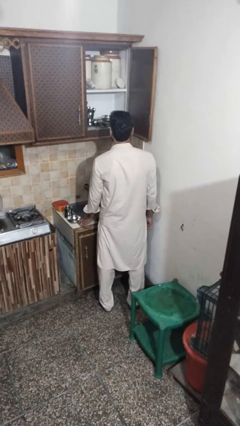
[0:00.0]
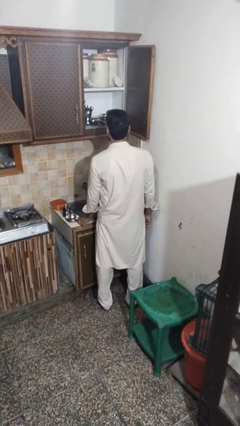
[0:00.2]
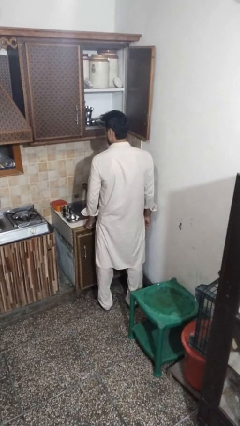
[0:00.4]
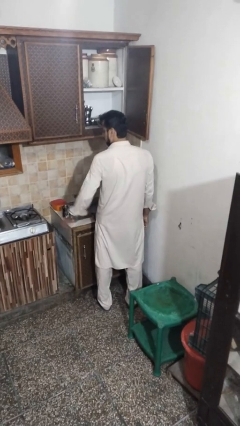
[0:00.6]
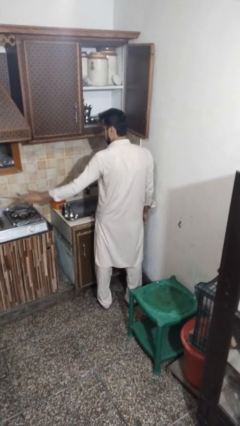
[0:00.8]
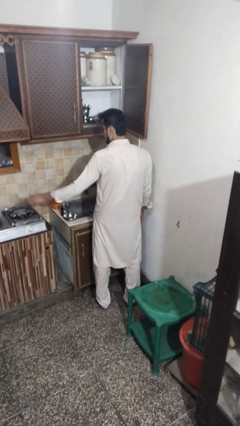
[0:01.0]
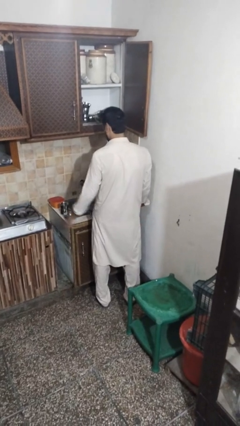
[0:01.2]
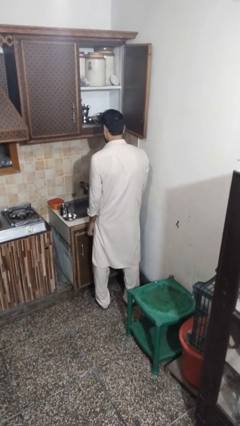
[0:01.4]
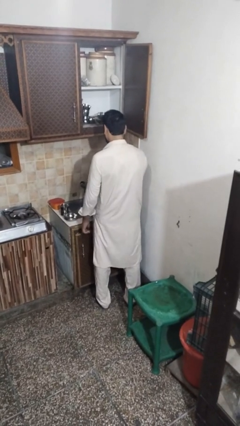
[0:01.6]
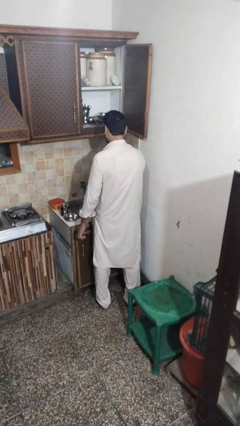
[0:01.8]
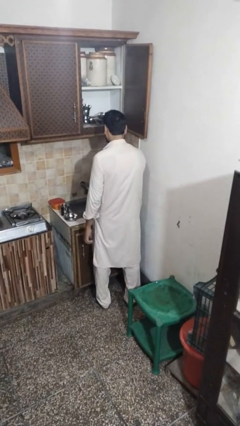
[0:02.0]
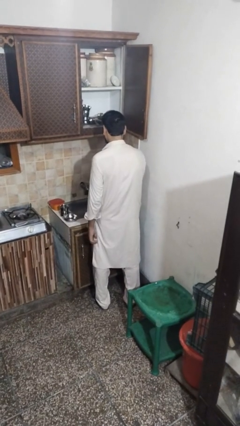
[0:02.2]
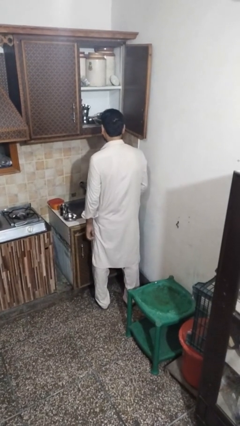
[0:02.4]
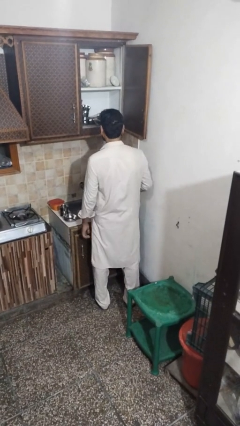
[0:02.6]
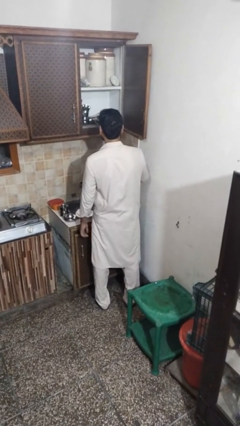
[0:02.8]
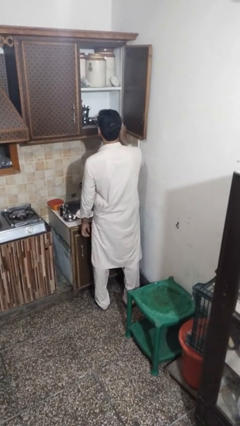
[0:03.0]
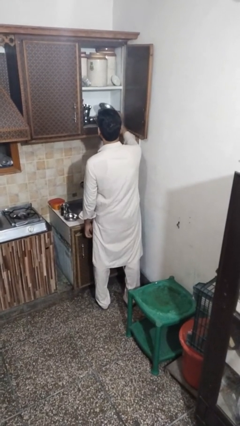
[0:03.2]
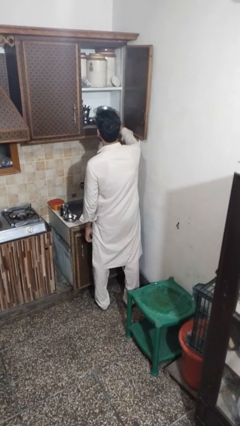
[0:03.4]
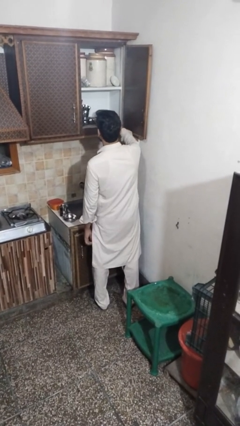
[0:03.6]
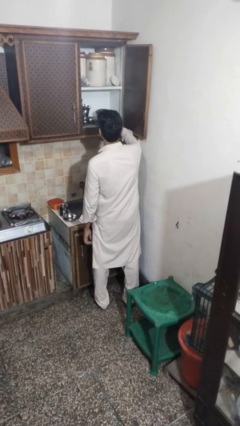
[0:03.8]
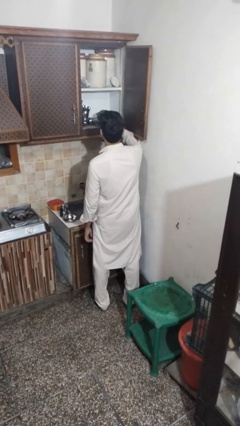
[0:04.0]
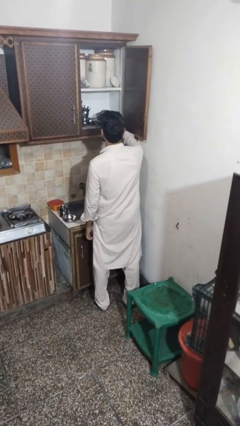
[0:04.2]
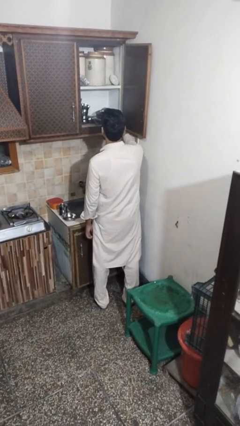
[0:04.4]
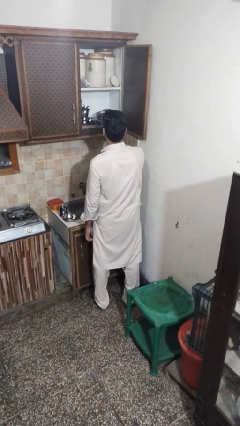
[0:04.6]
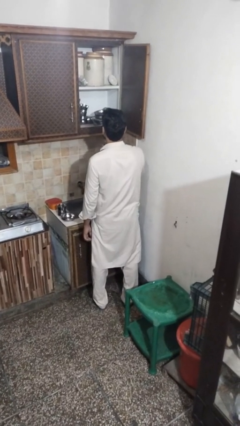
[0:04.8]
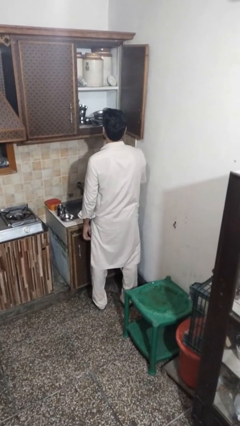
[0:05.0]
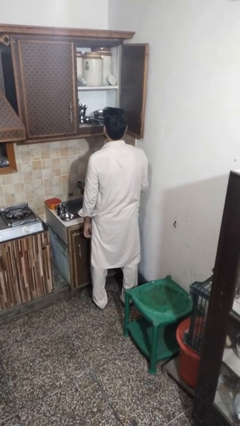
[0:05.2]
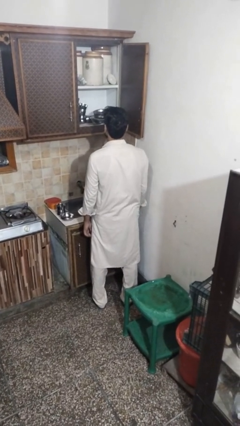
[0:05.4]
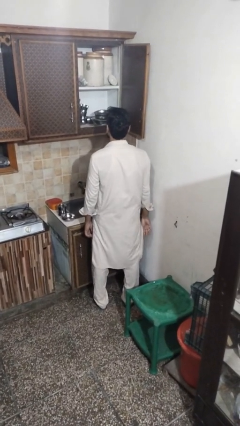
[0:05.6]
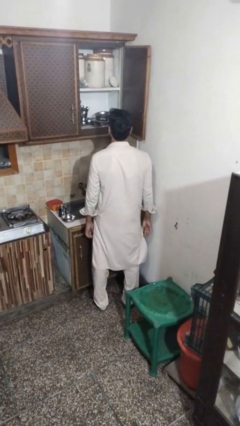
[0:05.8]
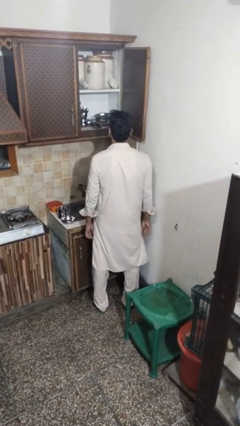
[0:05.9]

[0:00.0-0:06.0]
person puts object in cabinet

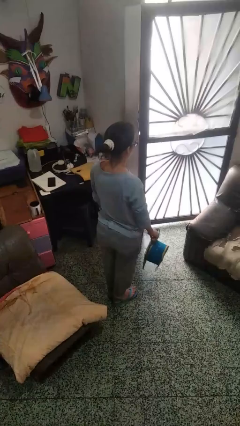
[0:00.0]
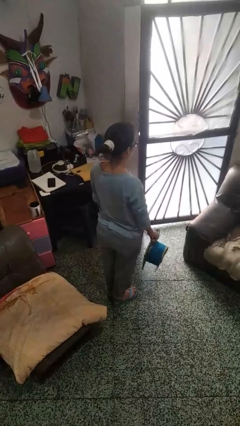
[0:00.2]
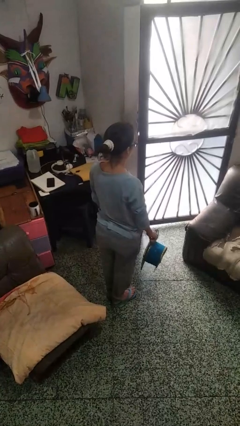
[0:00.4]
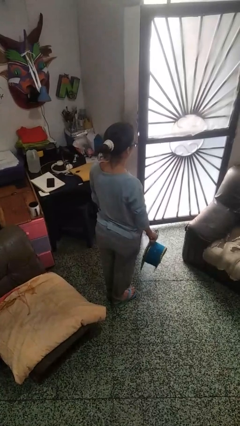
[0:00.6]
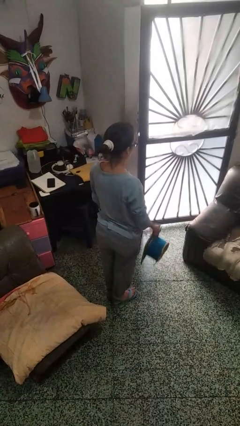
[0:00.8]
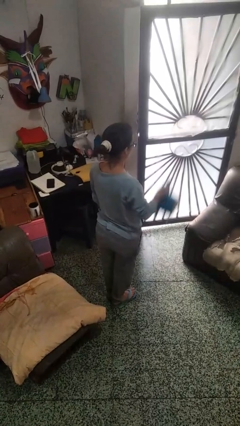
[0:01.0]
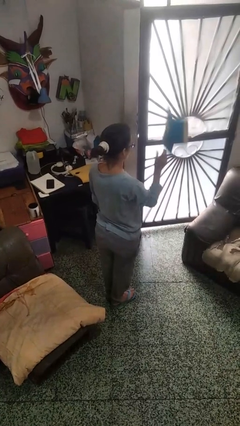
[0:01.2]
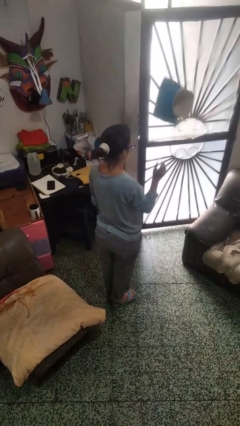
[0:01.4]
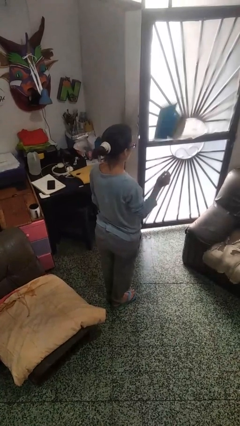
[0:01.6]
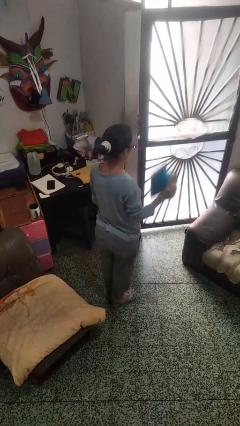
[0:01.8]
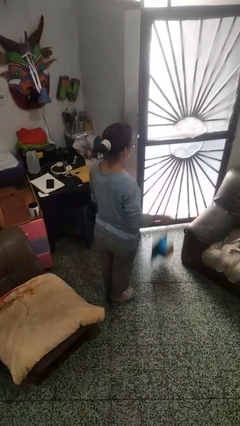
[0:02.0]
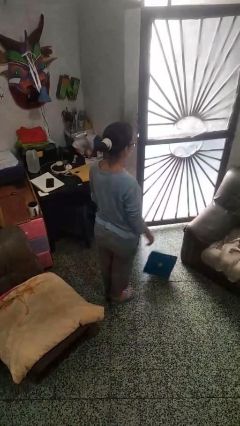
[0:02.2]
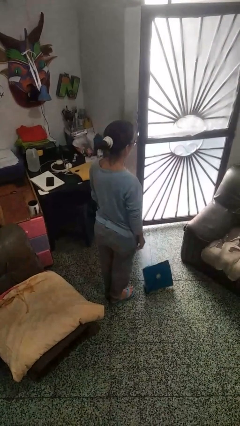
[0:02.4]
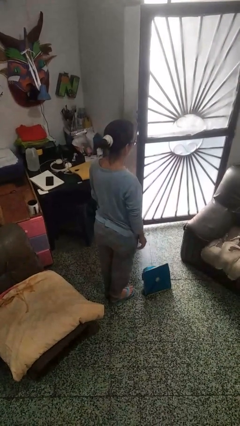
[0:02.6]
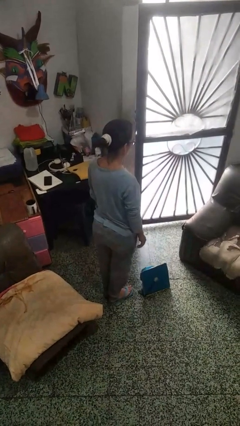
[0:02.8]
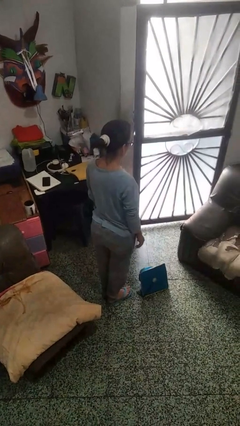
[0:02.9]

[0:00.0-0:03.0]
person throws object into air

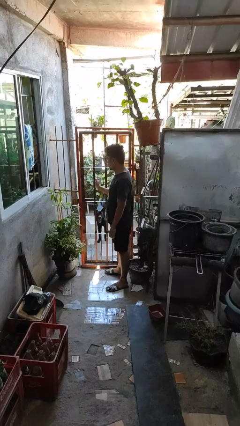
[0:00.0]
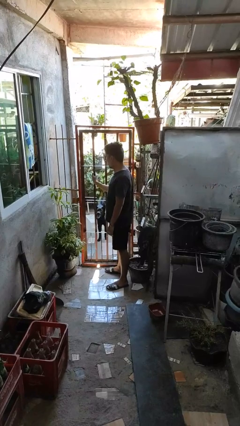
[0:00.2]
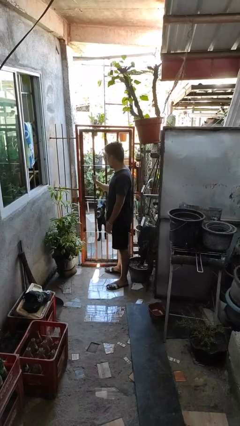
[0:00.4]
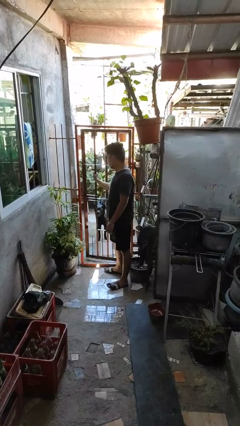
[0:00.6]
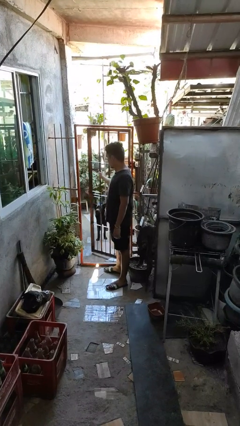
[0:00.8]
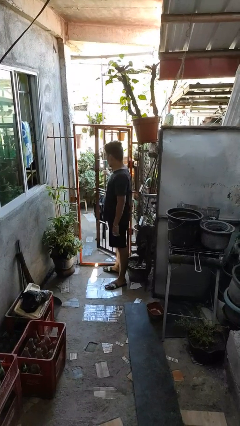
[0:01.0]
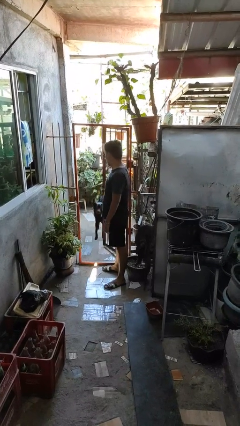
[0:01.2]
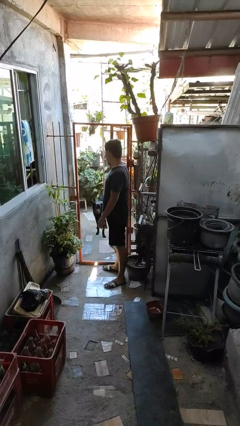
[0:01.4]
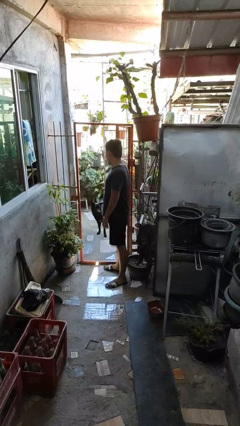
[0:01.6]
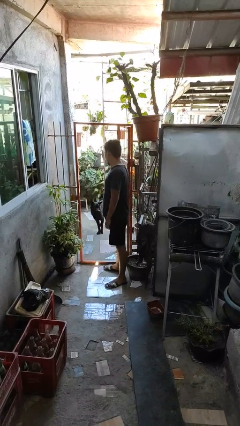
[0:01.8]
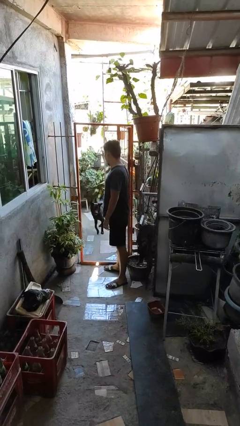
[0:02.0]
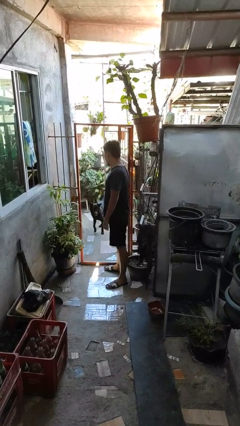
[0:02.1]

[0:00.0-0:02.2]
person opens gate

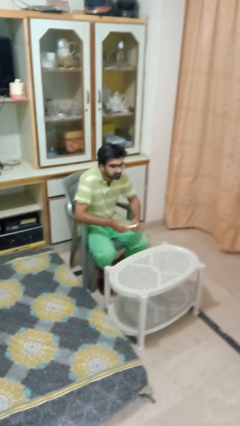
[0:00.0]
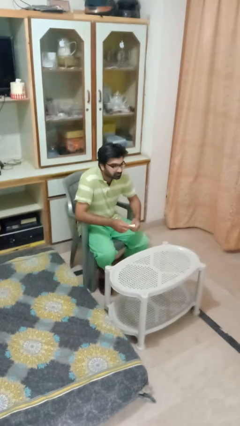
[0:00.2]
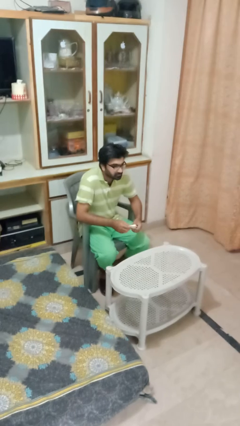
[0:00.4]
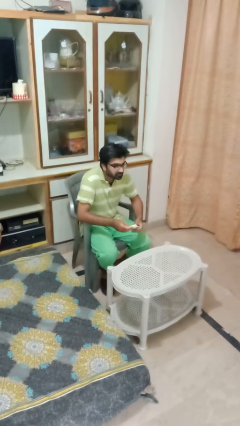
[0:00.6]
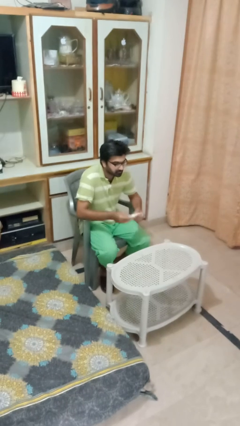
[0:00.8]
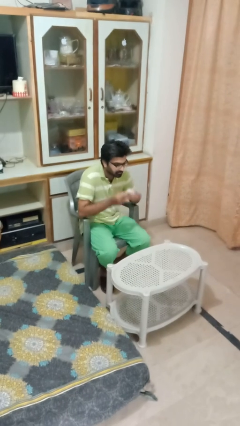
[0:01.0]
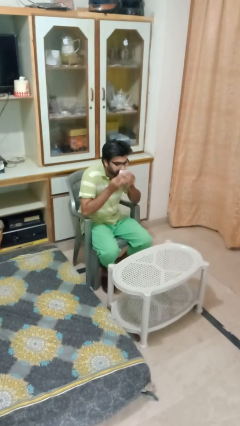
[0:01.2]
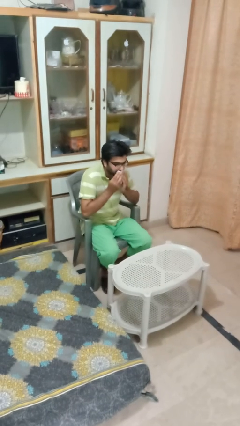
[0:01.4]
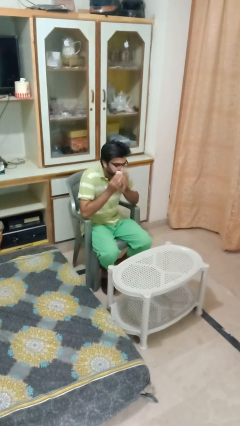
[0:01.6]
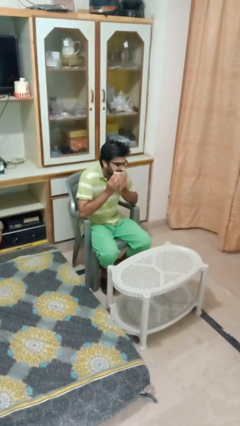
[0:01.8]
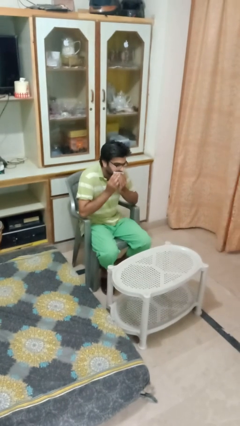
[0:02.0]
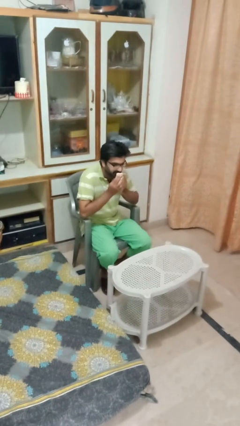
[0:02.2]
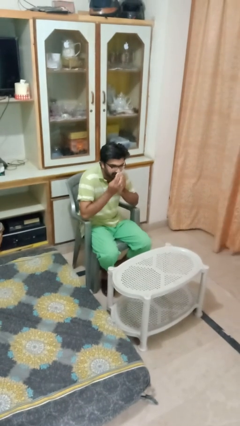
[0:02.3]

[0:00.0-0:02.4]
person wipes mouth with napkin

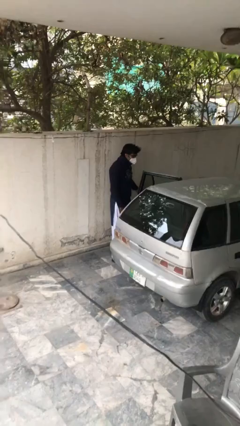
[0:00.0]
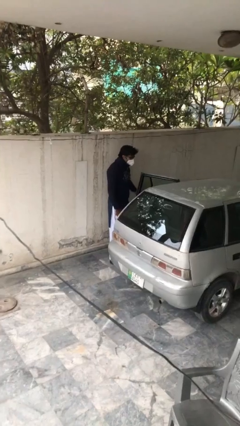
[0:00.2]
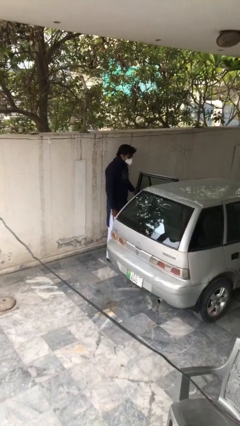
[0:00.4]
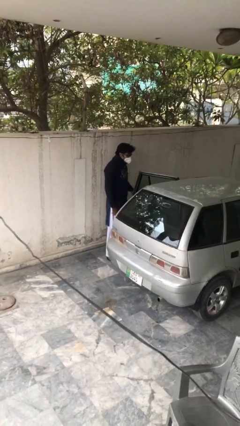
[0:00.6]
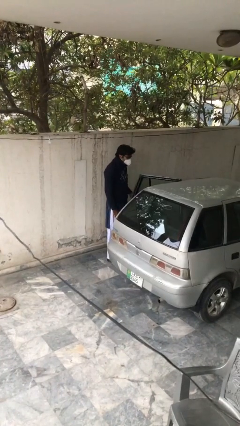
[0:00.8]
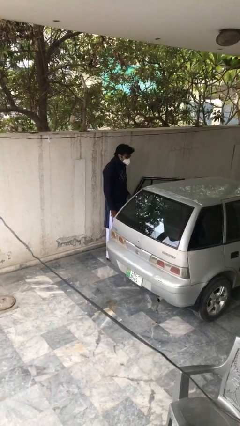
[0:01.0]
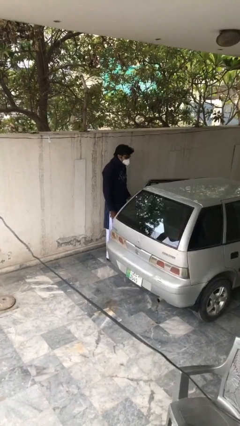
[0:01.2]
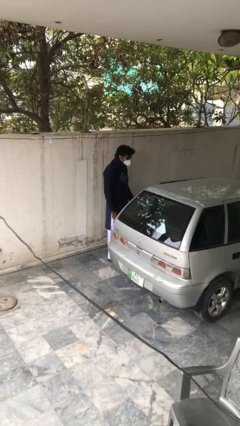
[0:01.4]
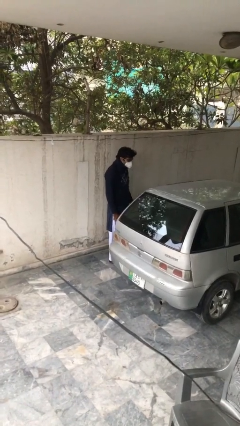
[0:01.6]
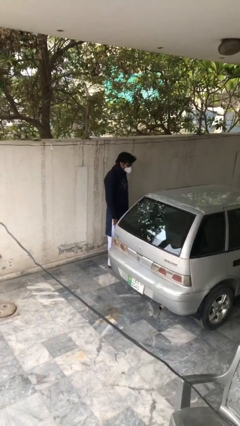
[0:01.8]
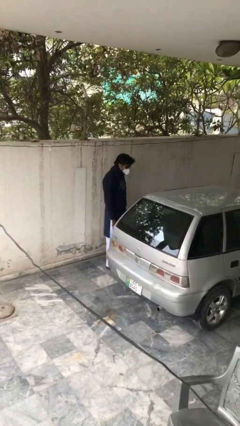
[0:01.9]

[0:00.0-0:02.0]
person closes car door

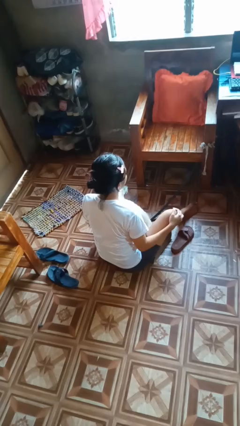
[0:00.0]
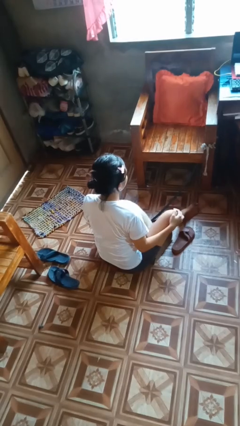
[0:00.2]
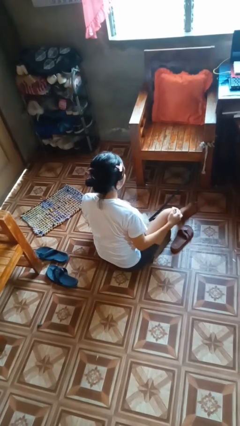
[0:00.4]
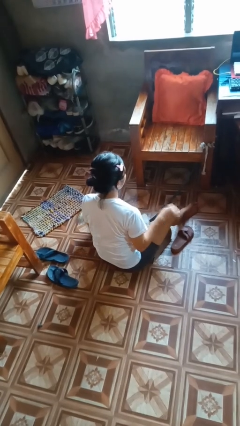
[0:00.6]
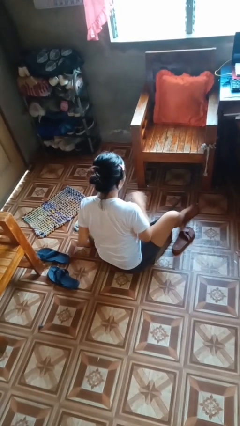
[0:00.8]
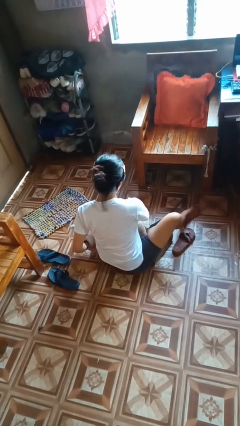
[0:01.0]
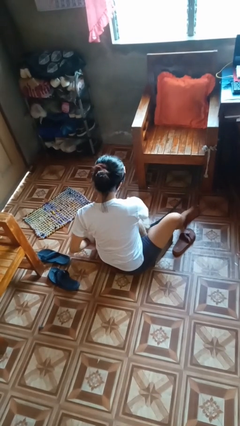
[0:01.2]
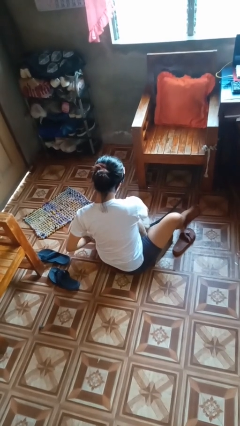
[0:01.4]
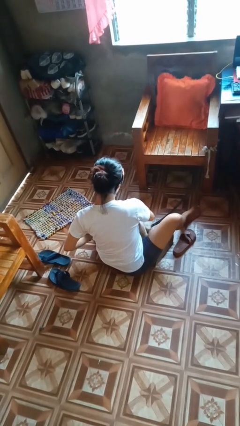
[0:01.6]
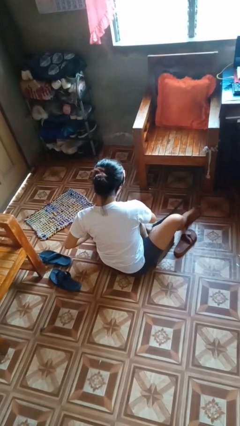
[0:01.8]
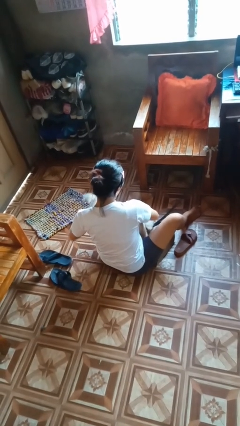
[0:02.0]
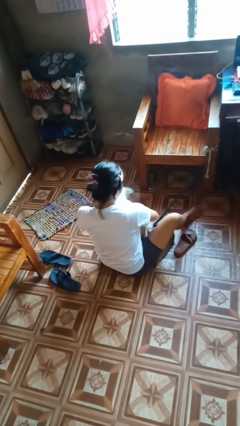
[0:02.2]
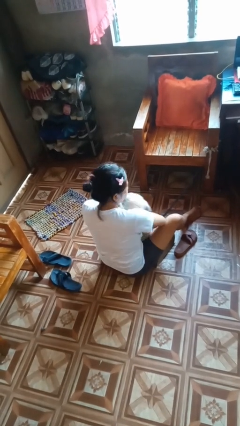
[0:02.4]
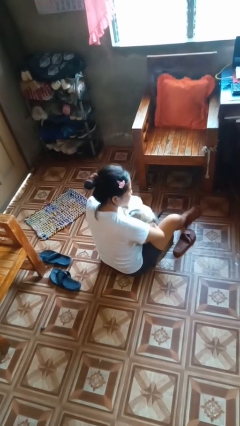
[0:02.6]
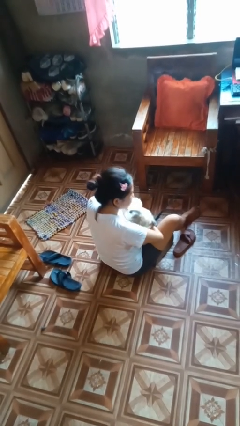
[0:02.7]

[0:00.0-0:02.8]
person hugs dog
